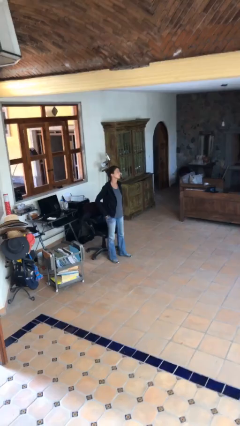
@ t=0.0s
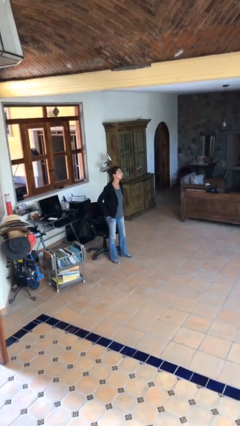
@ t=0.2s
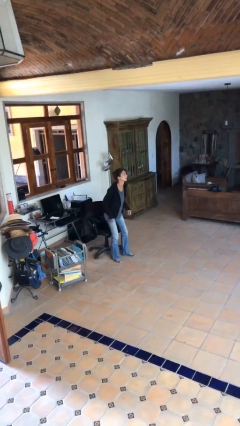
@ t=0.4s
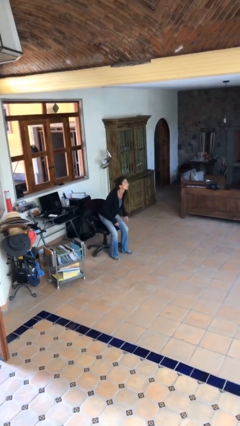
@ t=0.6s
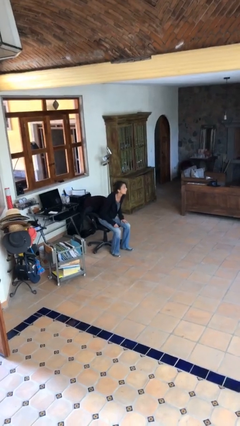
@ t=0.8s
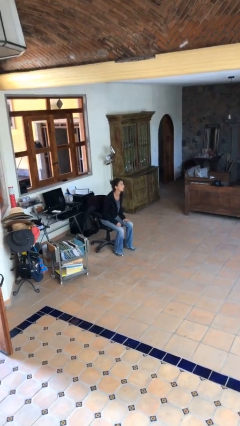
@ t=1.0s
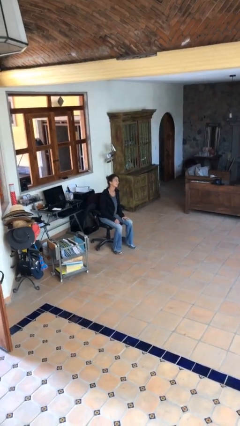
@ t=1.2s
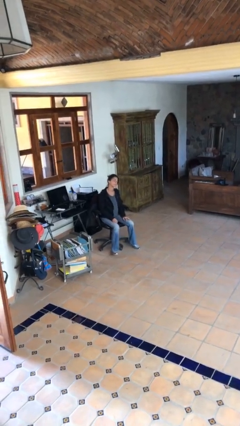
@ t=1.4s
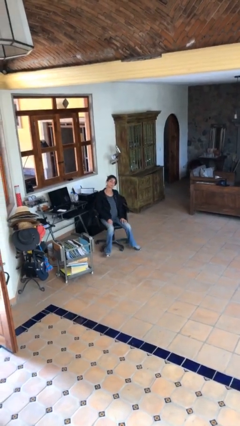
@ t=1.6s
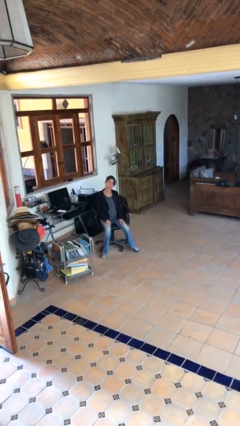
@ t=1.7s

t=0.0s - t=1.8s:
person sits down

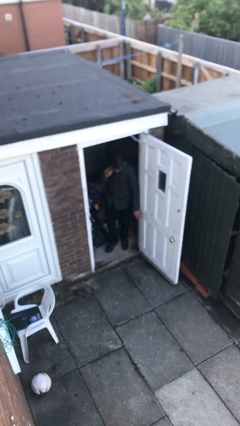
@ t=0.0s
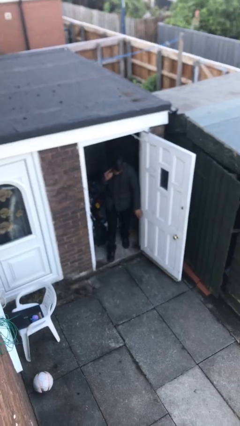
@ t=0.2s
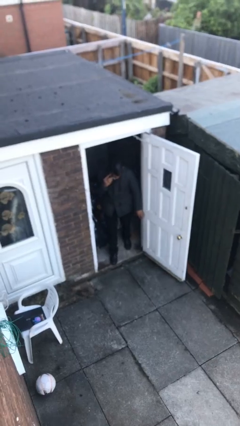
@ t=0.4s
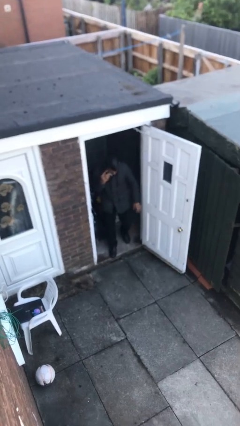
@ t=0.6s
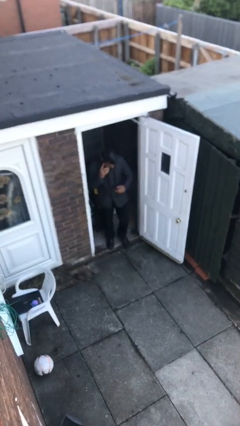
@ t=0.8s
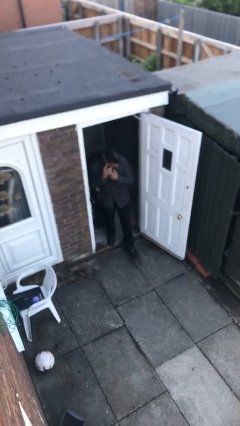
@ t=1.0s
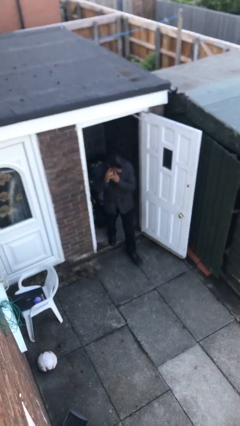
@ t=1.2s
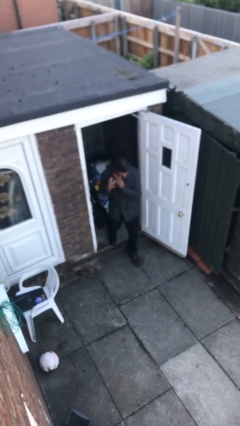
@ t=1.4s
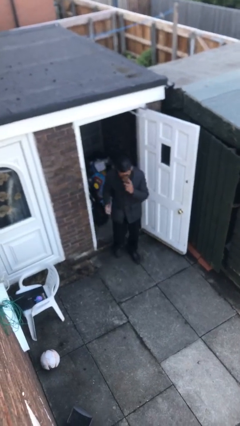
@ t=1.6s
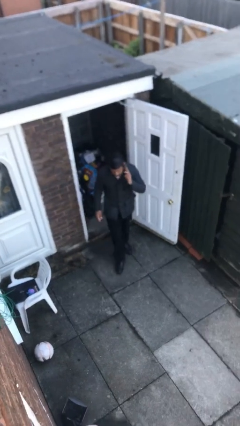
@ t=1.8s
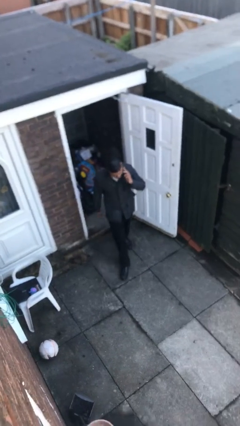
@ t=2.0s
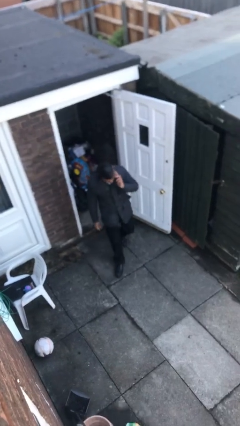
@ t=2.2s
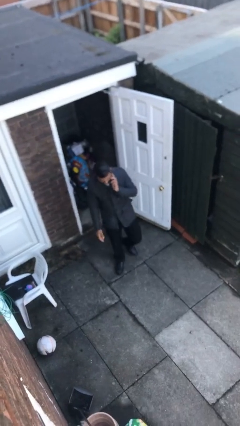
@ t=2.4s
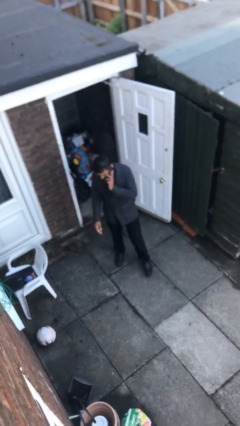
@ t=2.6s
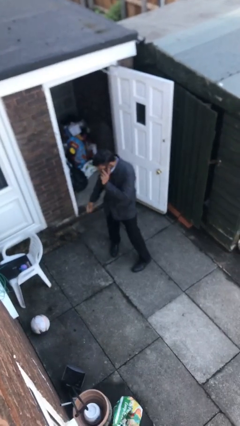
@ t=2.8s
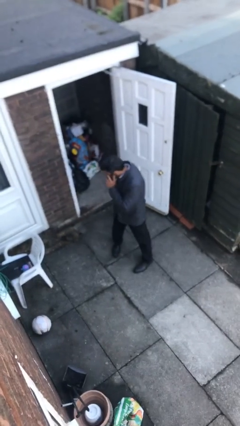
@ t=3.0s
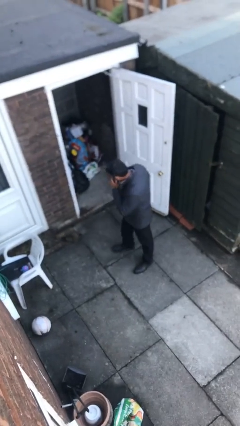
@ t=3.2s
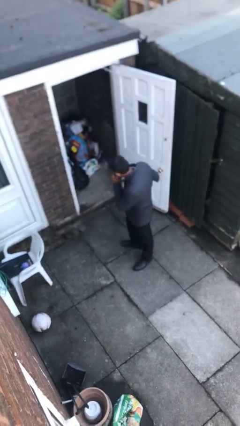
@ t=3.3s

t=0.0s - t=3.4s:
person enters scene through structure

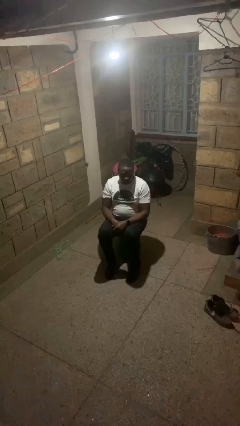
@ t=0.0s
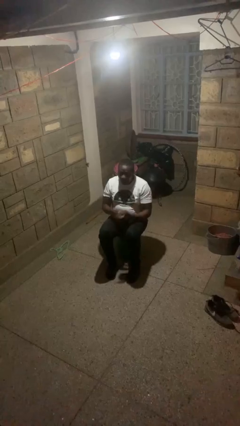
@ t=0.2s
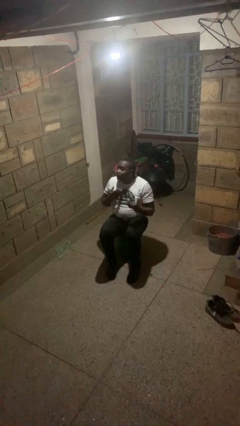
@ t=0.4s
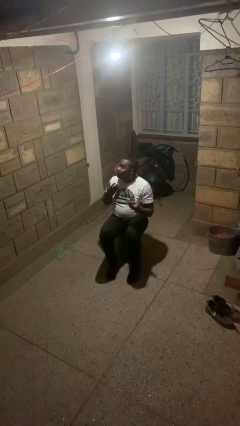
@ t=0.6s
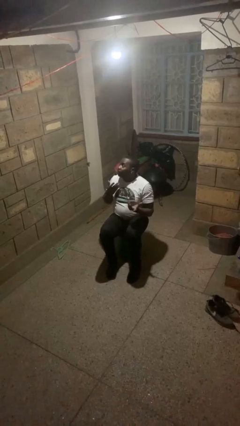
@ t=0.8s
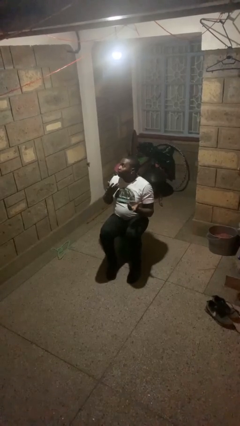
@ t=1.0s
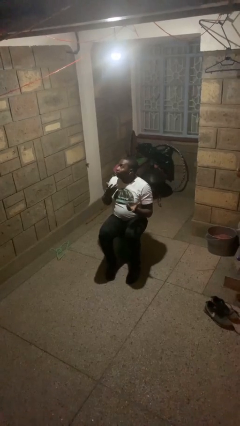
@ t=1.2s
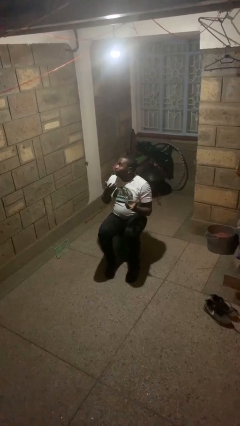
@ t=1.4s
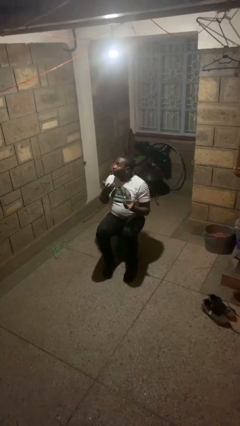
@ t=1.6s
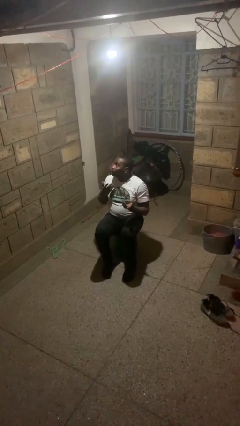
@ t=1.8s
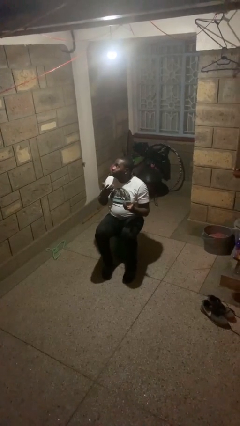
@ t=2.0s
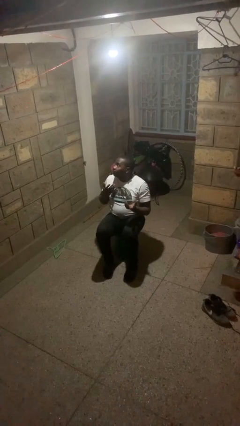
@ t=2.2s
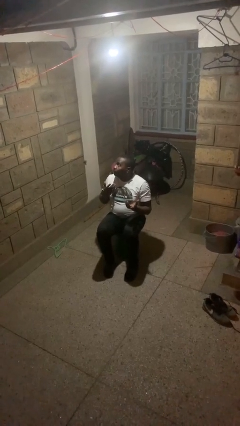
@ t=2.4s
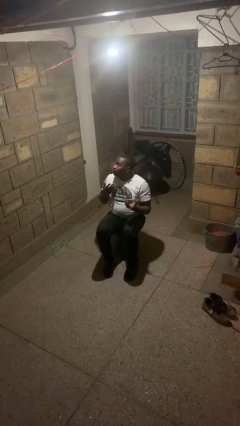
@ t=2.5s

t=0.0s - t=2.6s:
person shrugs

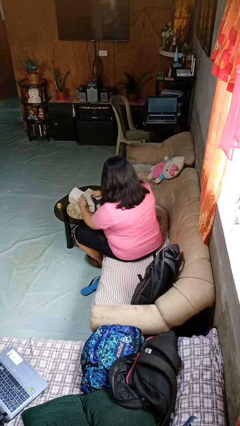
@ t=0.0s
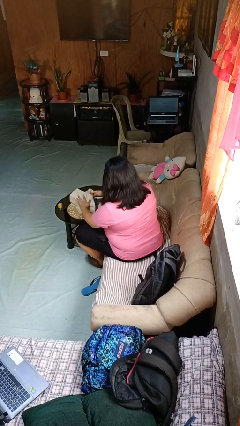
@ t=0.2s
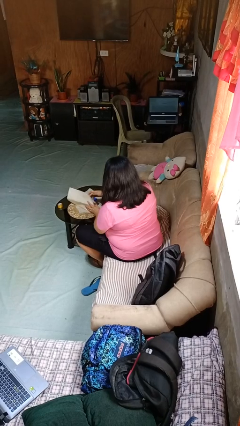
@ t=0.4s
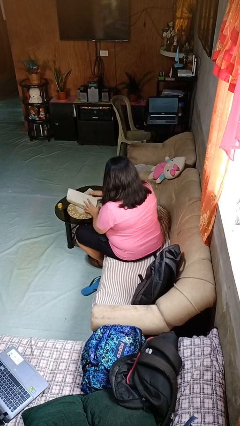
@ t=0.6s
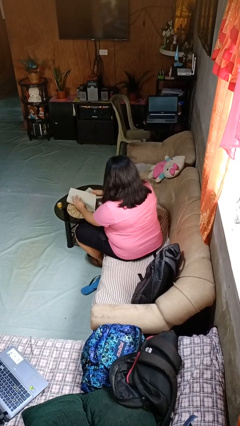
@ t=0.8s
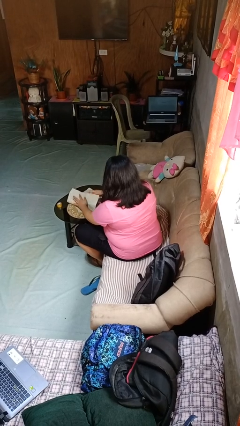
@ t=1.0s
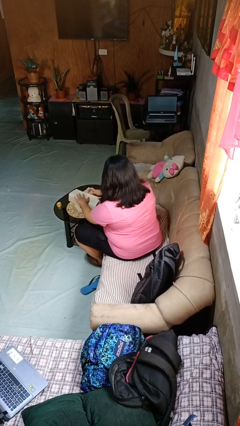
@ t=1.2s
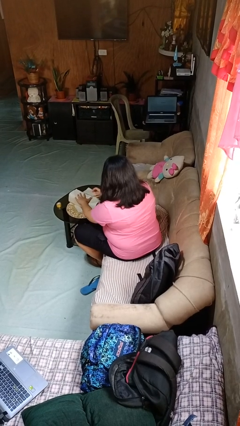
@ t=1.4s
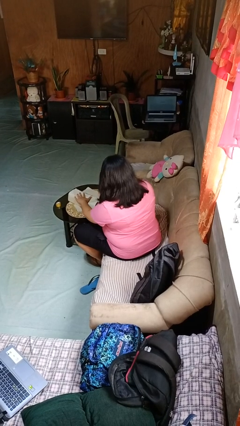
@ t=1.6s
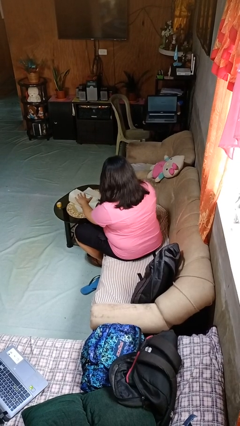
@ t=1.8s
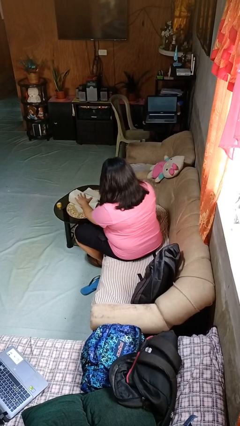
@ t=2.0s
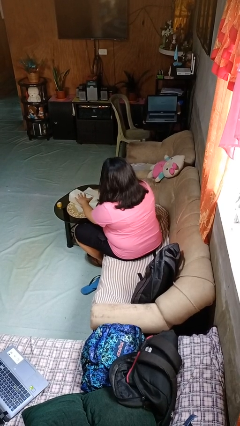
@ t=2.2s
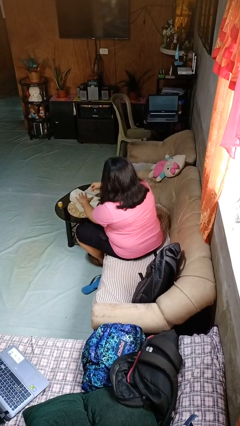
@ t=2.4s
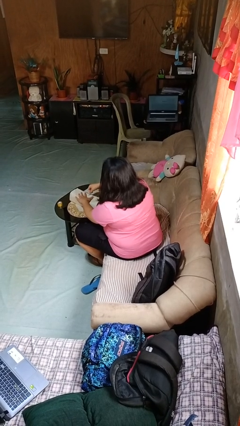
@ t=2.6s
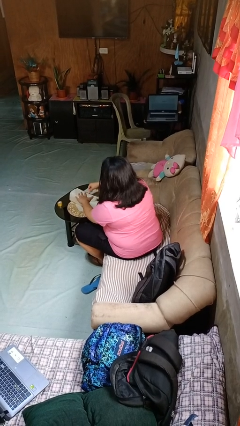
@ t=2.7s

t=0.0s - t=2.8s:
person wraps box

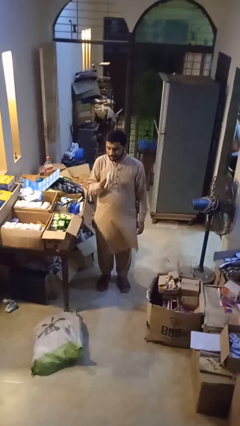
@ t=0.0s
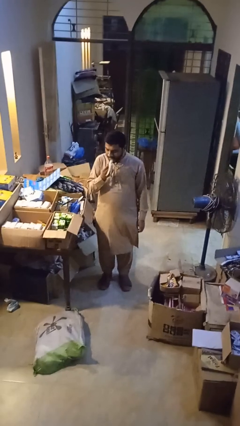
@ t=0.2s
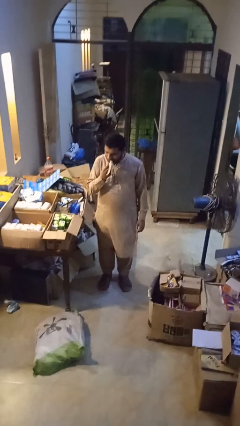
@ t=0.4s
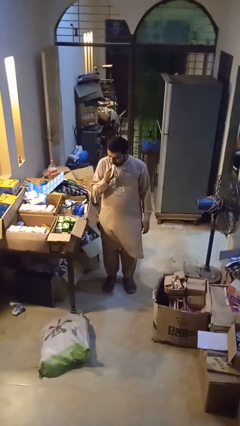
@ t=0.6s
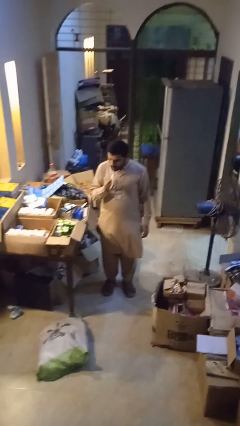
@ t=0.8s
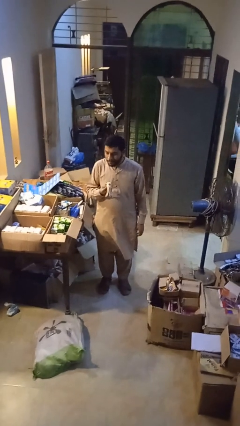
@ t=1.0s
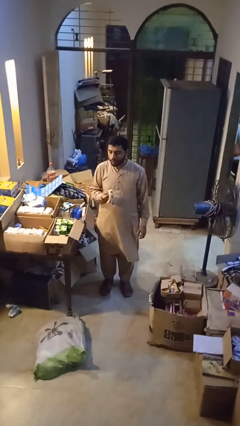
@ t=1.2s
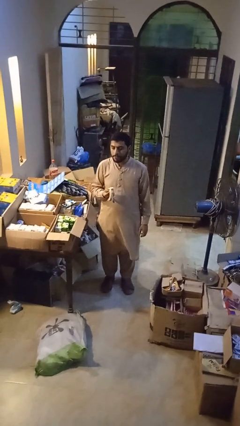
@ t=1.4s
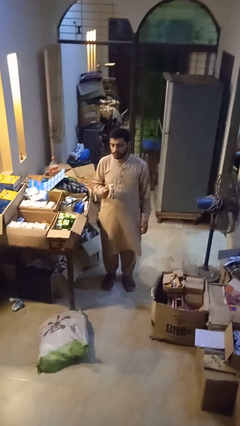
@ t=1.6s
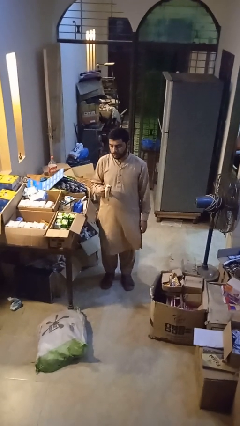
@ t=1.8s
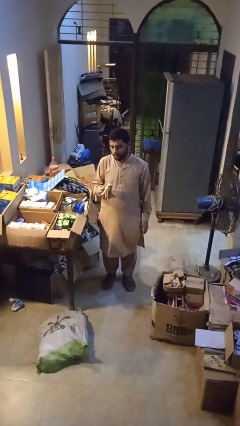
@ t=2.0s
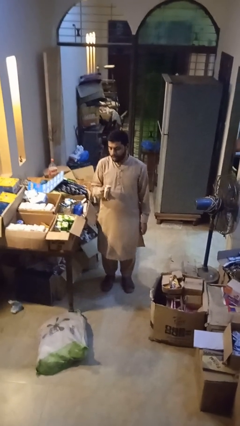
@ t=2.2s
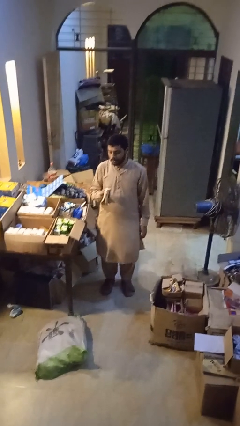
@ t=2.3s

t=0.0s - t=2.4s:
person eats banana

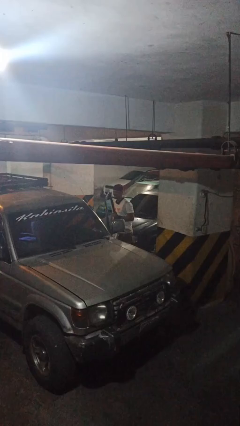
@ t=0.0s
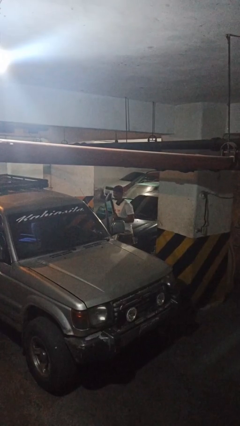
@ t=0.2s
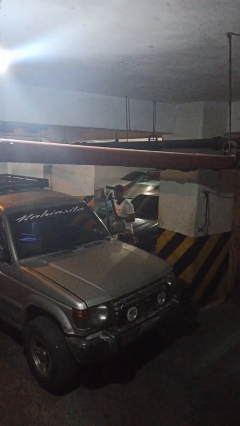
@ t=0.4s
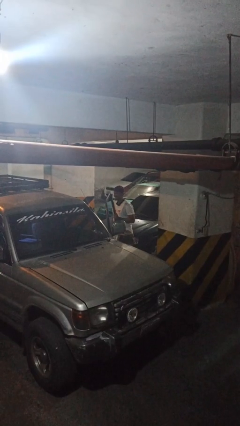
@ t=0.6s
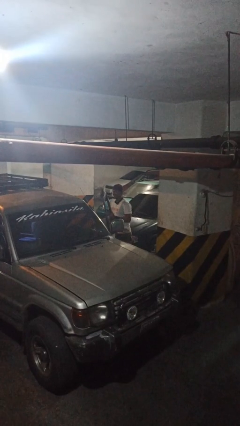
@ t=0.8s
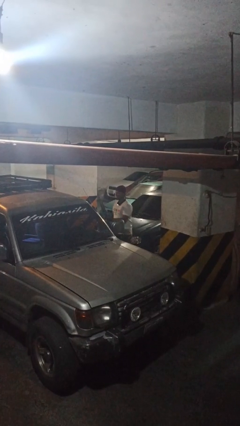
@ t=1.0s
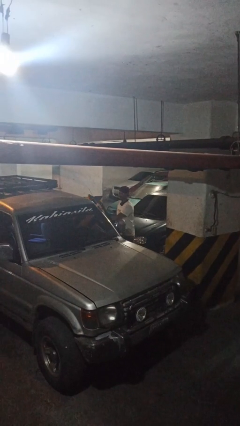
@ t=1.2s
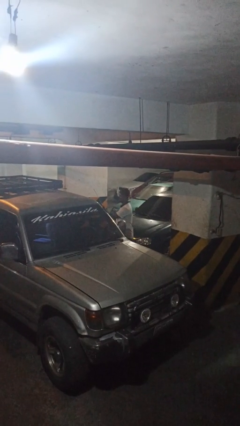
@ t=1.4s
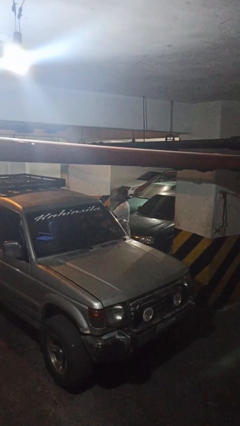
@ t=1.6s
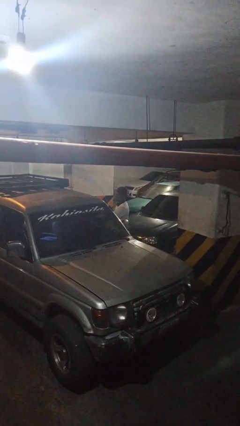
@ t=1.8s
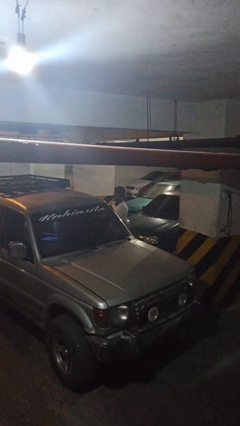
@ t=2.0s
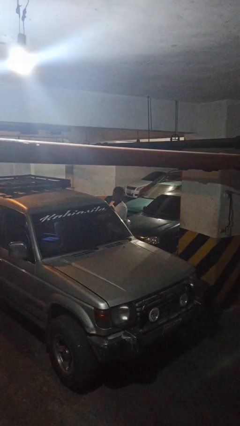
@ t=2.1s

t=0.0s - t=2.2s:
person closes car door

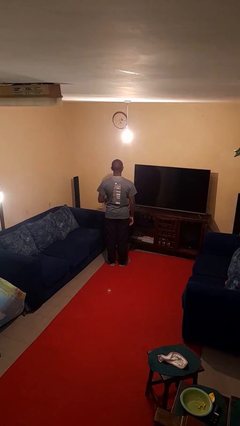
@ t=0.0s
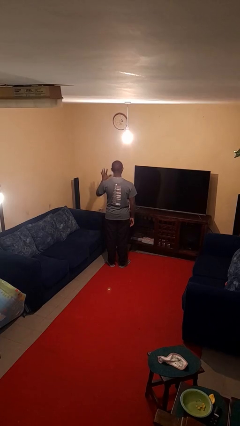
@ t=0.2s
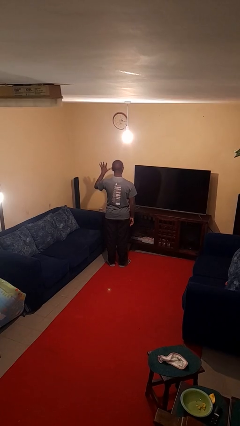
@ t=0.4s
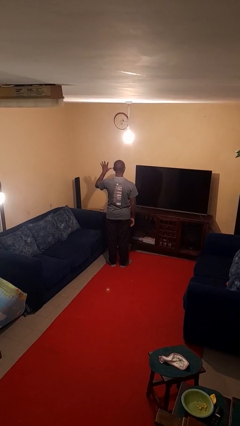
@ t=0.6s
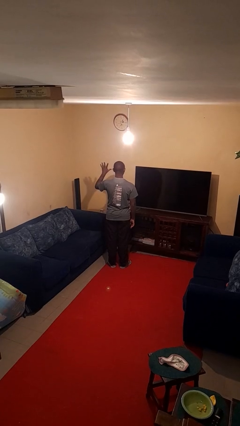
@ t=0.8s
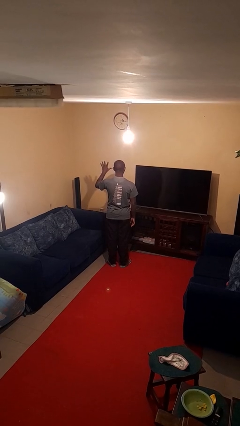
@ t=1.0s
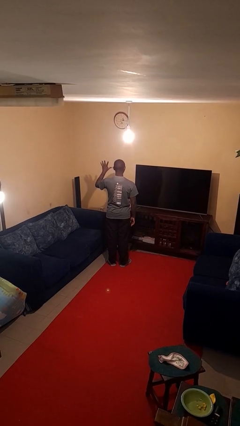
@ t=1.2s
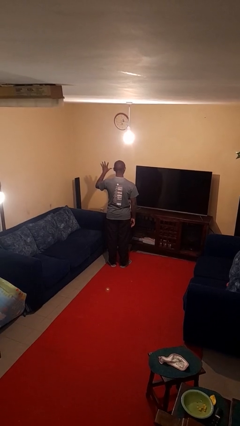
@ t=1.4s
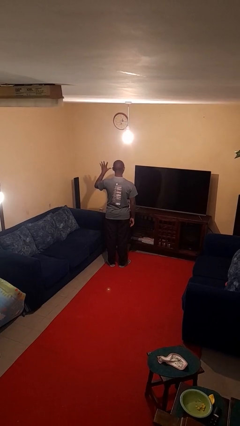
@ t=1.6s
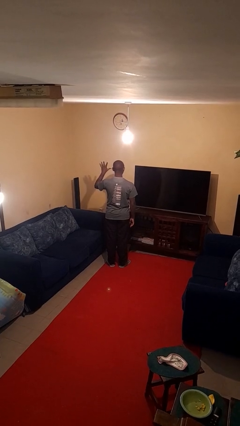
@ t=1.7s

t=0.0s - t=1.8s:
person gestures number five
